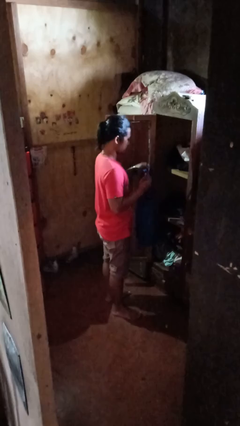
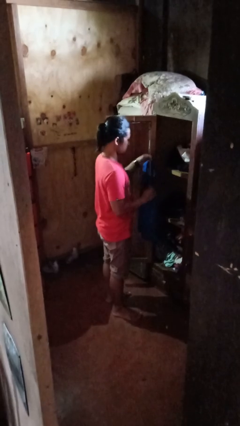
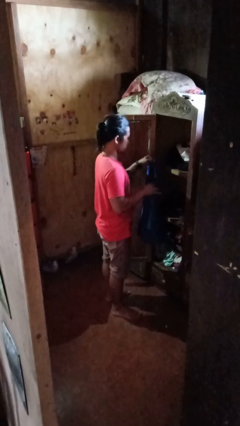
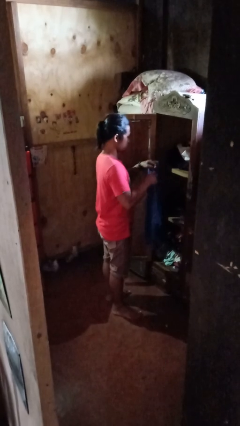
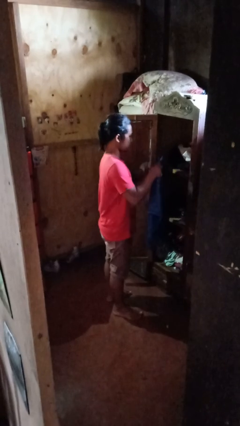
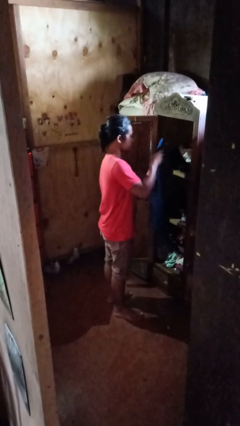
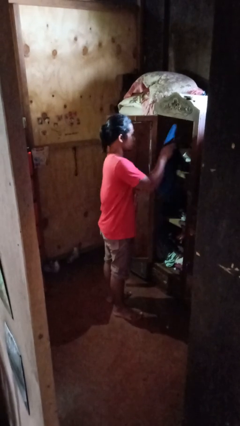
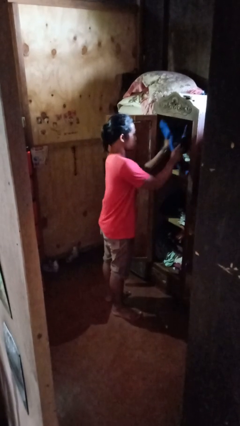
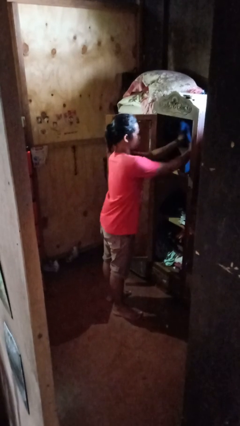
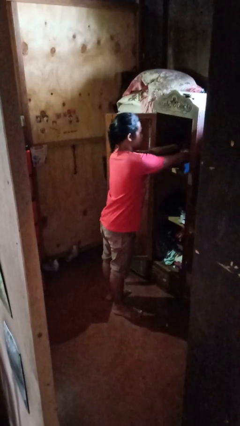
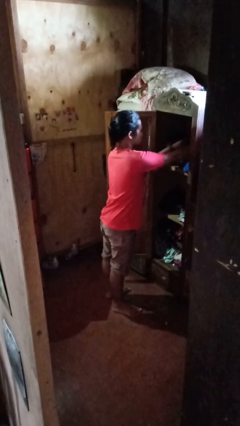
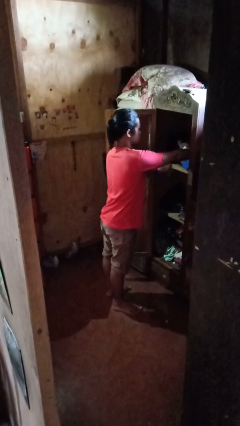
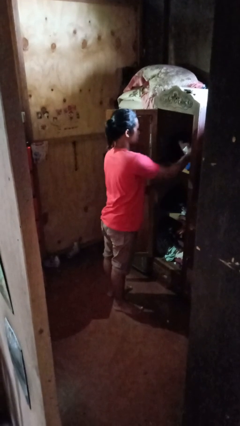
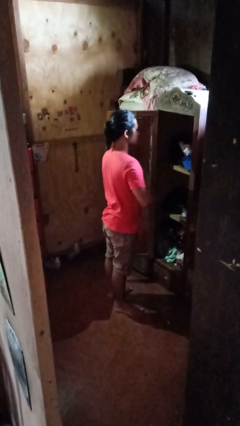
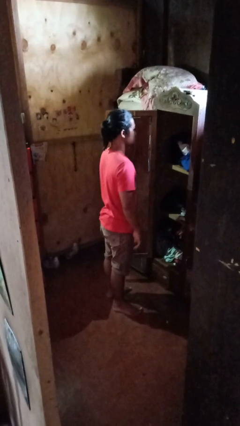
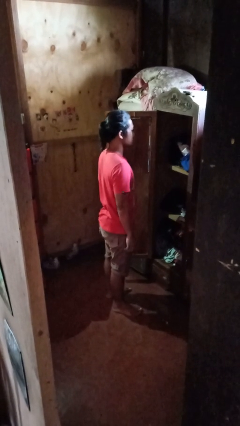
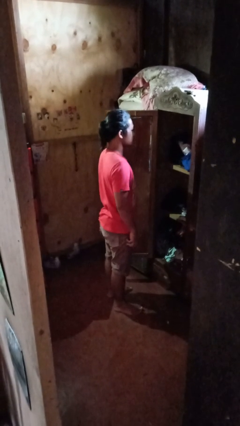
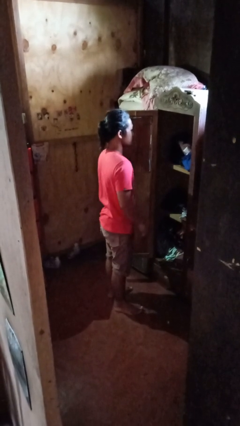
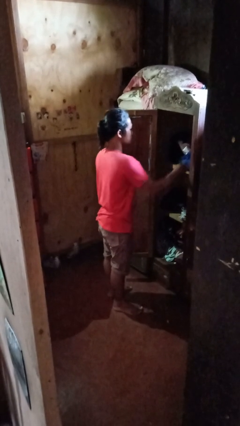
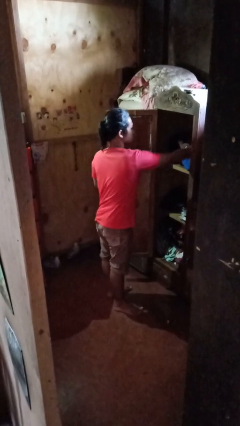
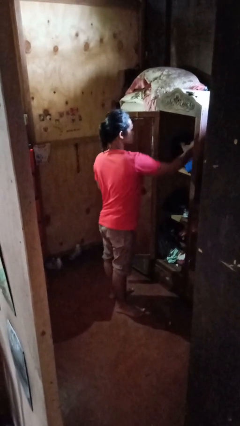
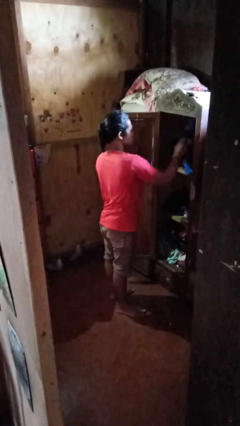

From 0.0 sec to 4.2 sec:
person puts clothes into closet

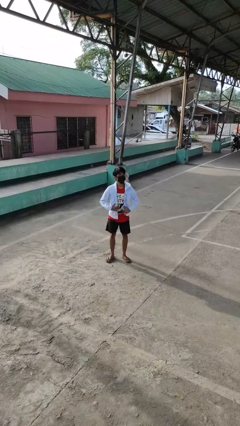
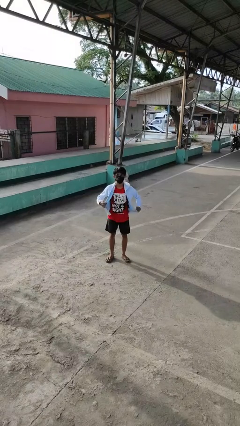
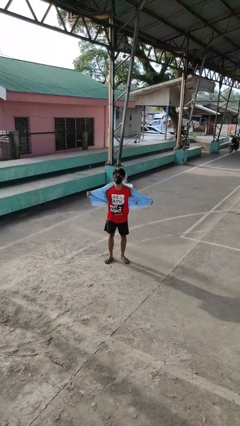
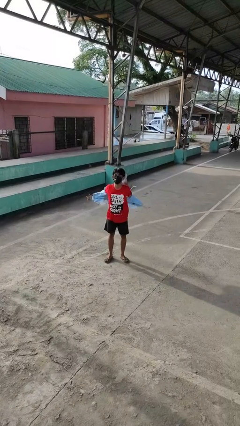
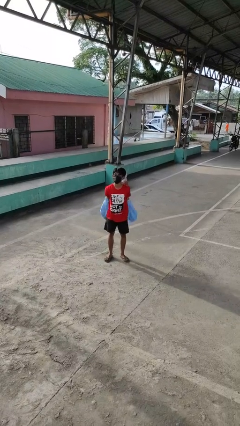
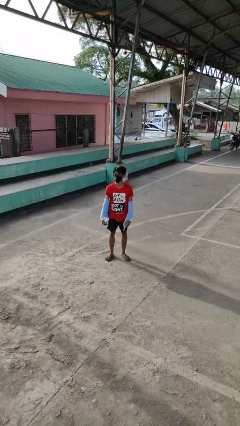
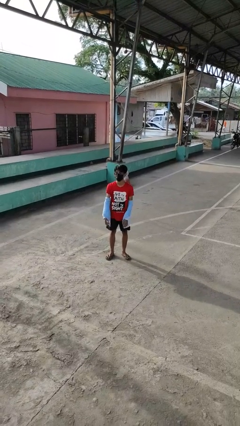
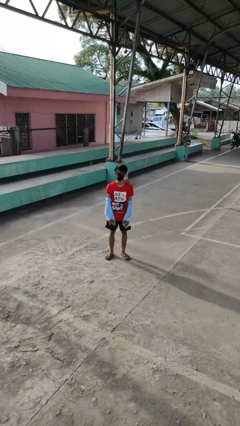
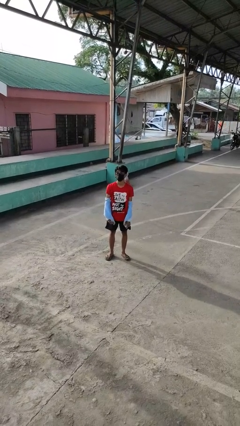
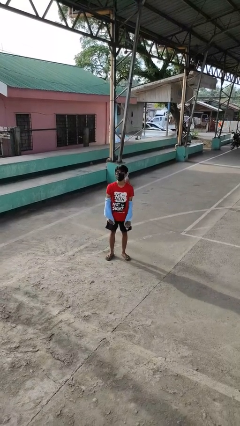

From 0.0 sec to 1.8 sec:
person takes off jacket

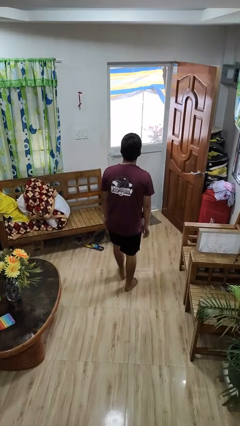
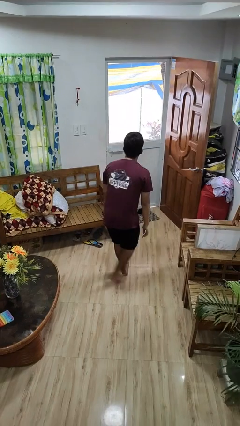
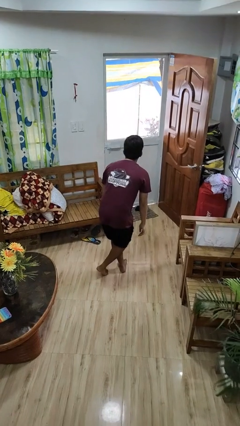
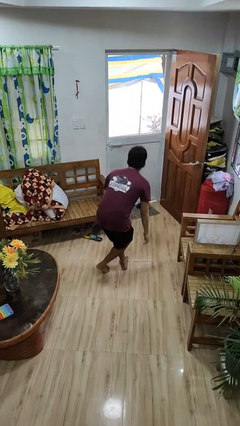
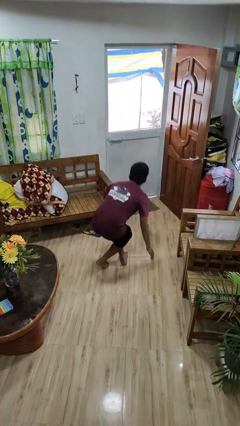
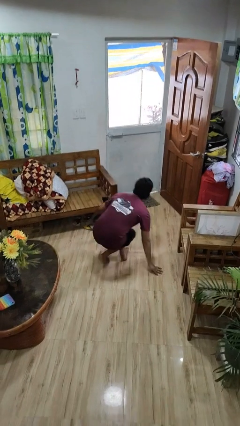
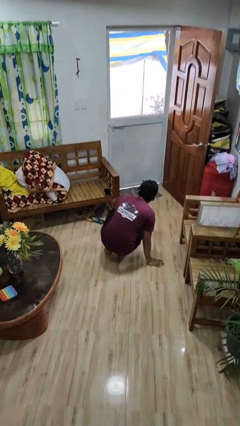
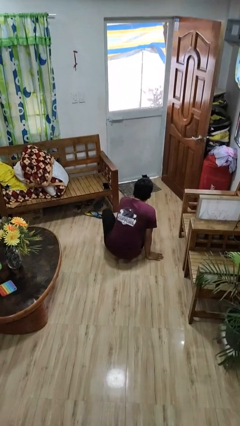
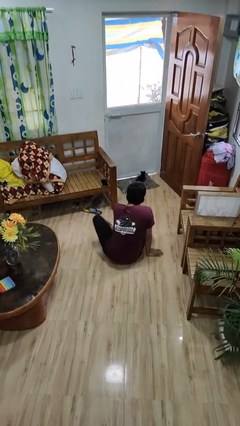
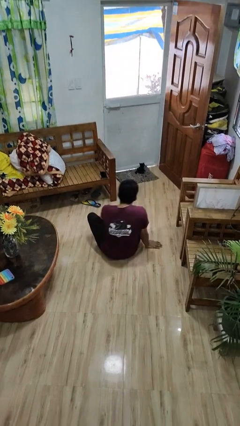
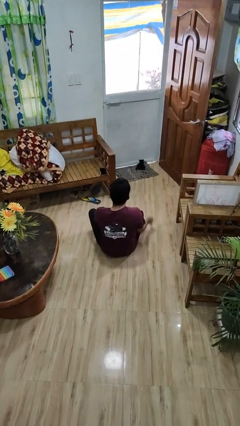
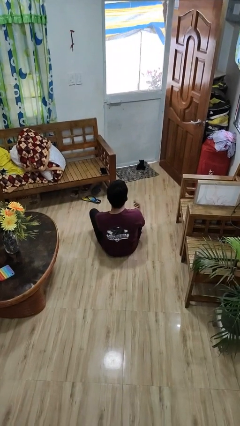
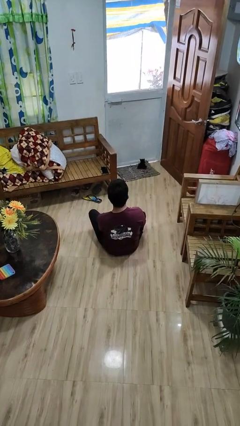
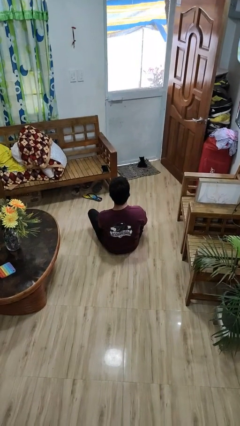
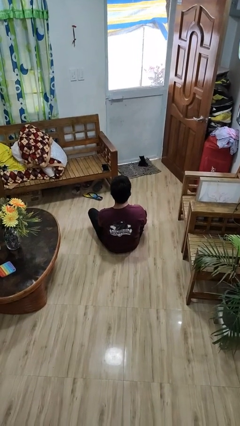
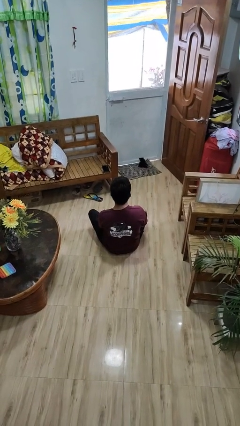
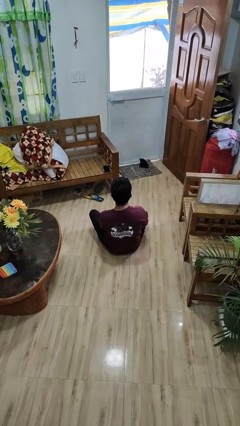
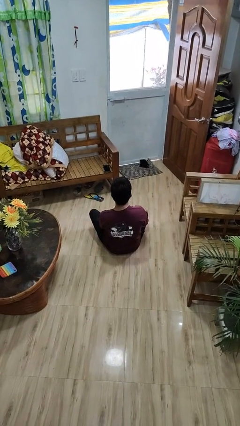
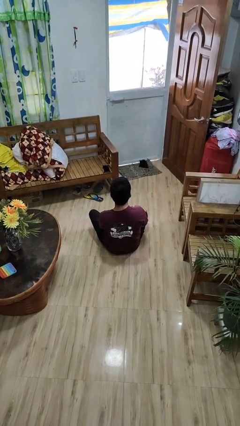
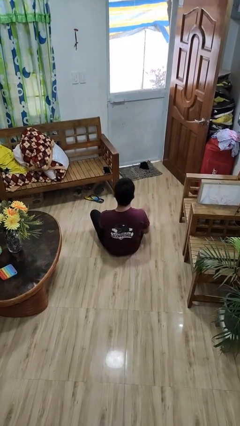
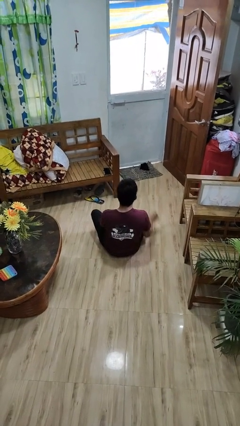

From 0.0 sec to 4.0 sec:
person sits crisscross

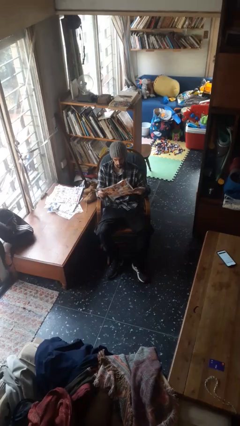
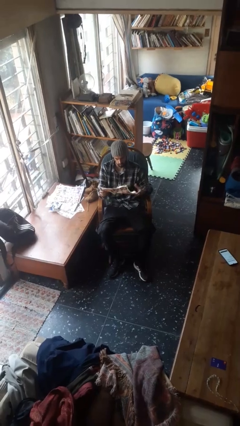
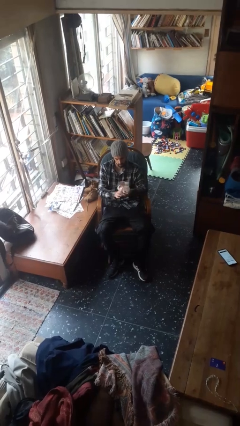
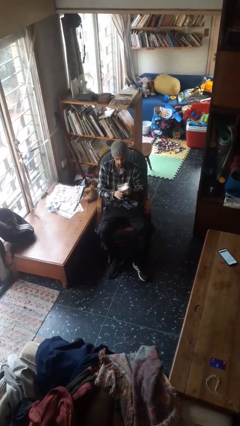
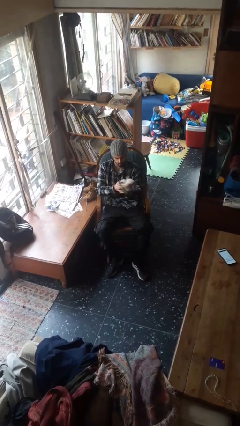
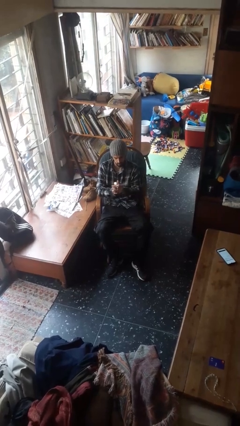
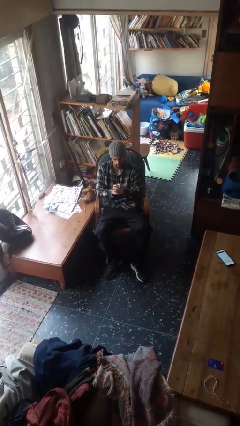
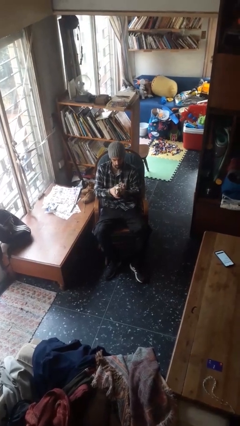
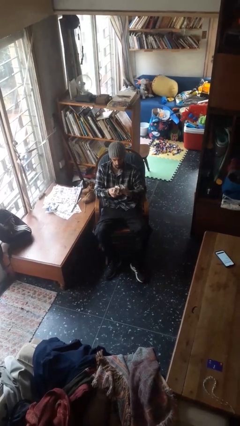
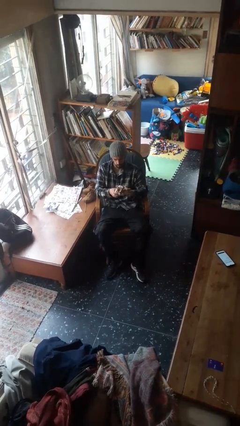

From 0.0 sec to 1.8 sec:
person crumples paper

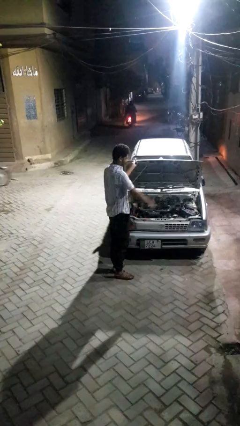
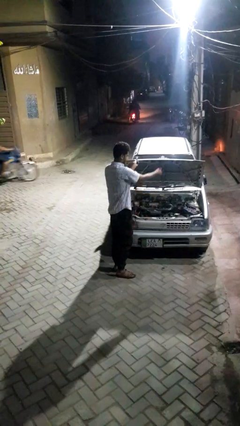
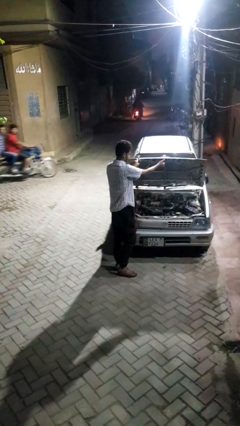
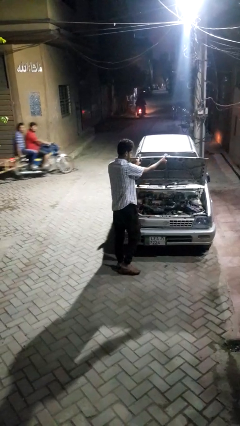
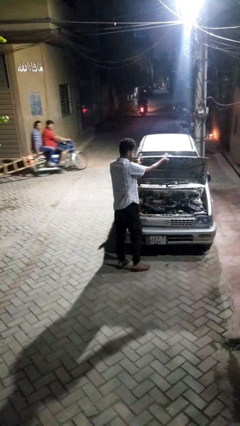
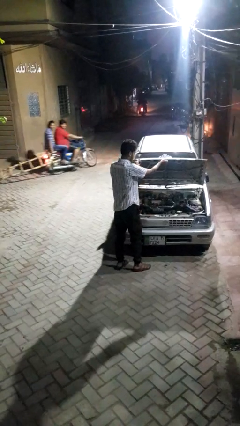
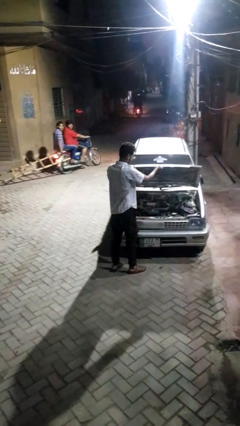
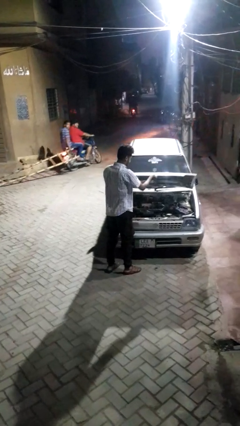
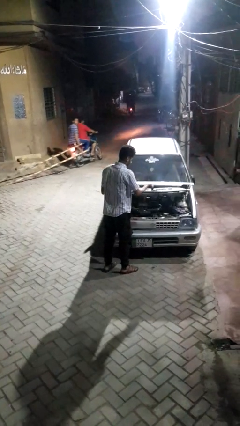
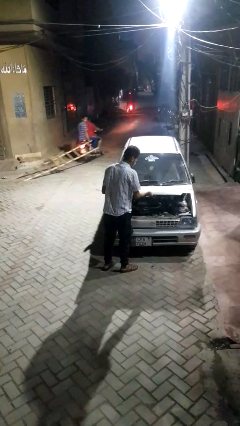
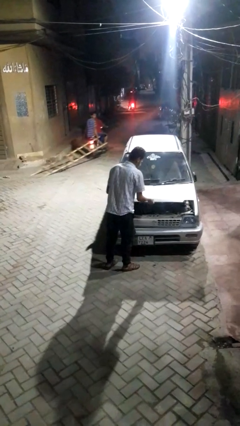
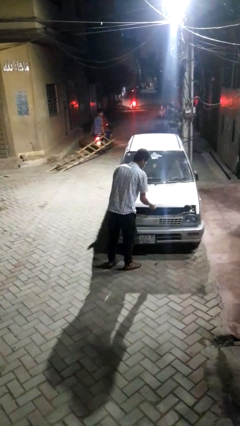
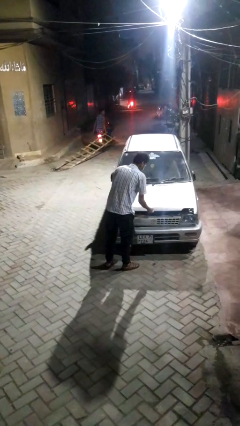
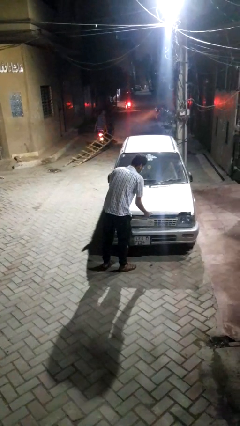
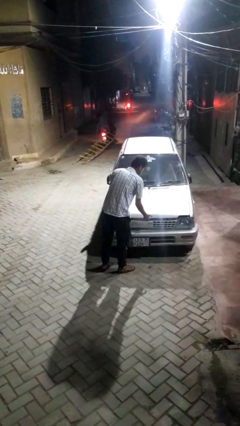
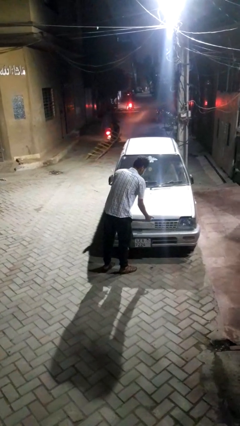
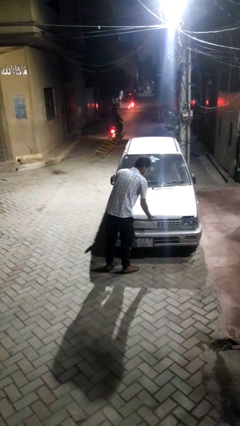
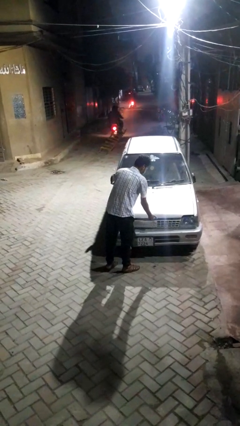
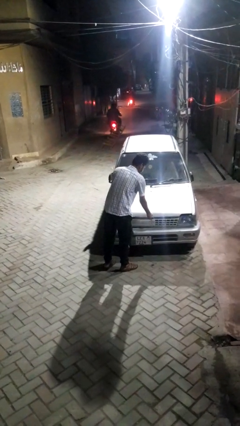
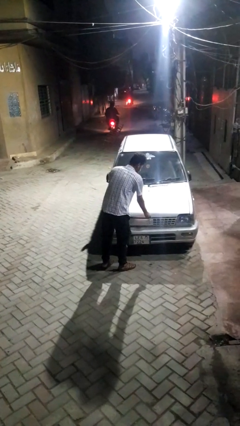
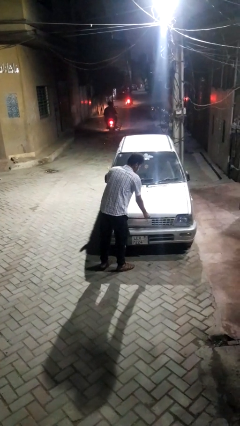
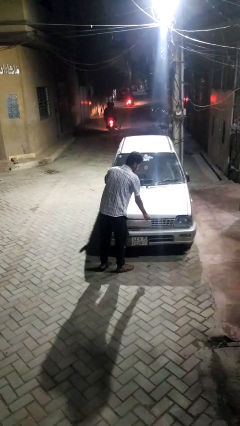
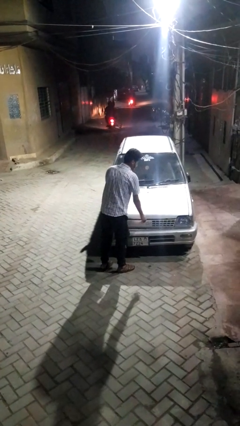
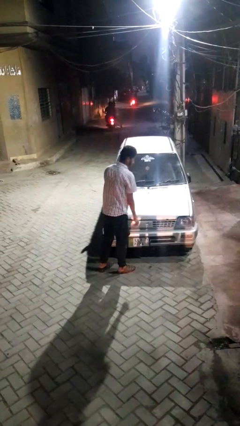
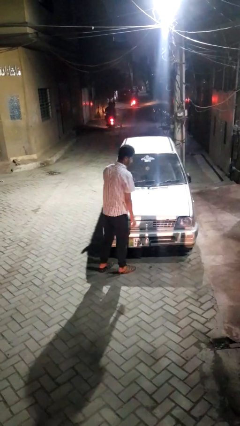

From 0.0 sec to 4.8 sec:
person closes car hood

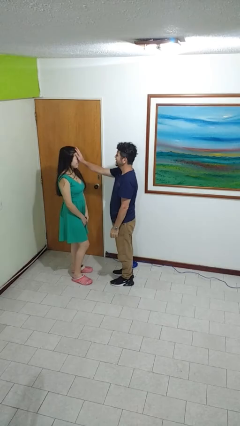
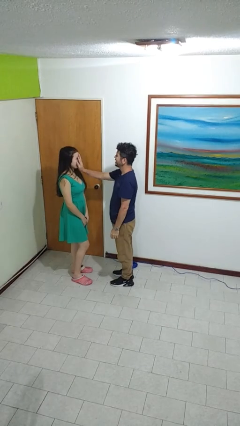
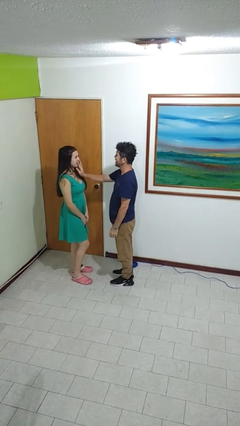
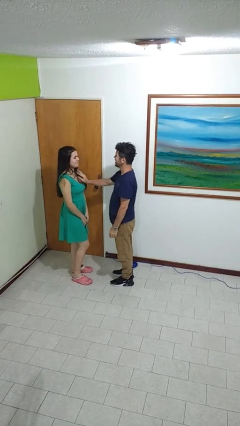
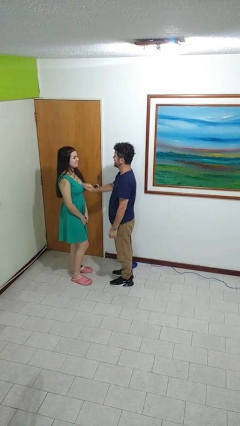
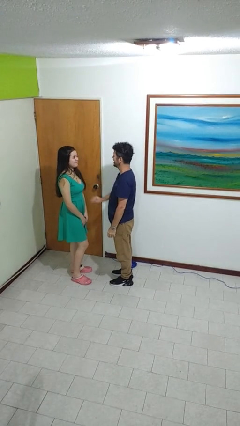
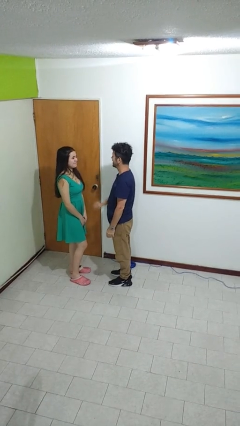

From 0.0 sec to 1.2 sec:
person touches face of person
